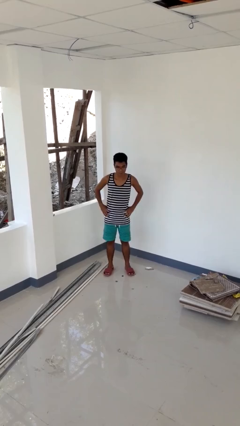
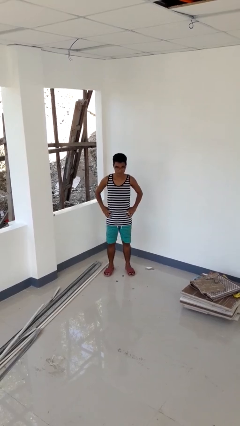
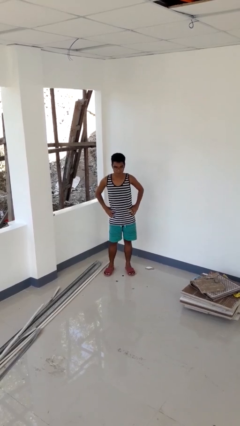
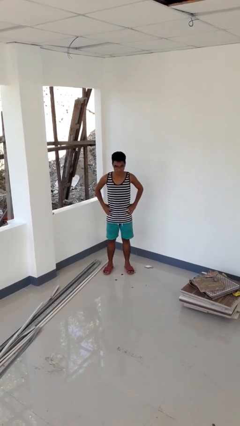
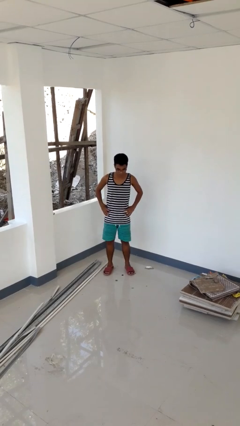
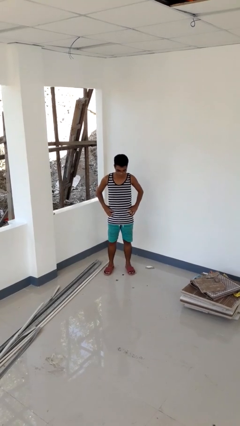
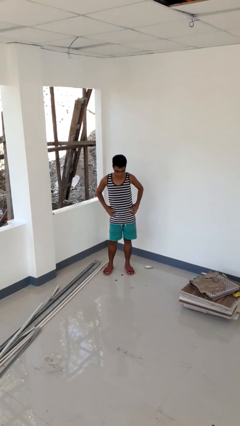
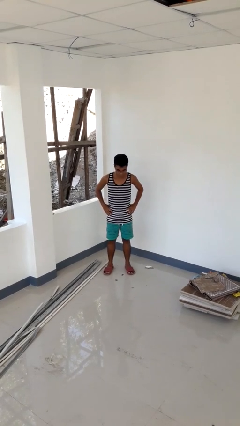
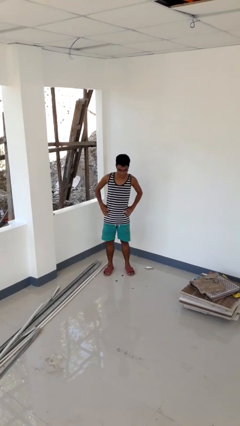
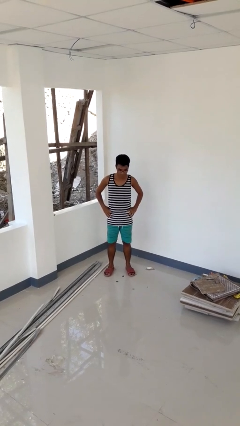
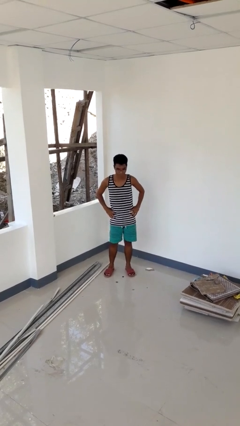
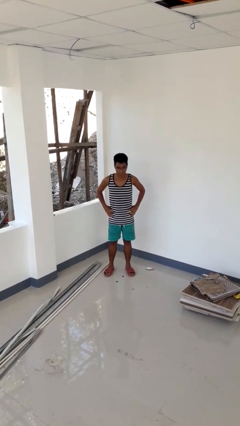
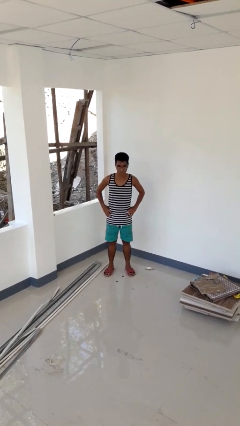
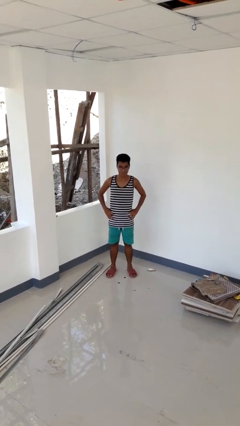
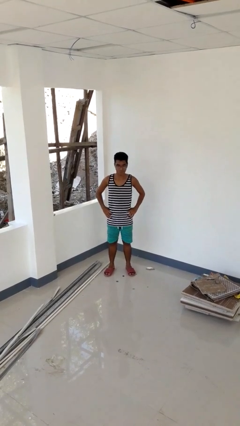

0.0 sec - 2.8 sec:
person wiggles hips

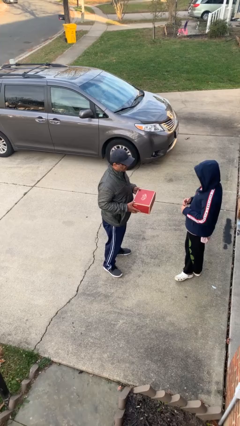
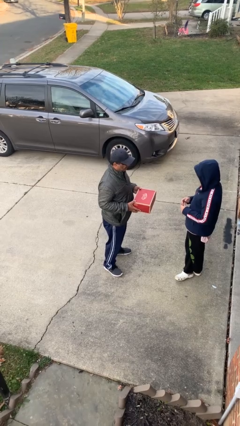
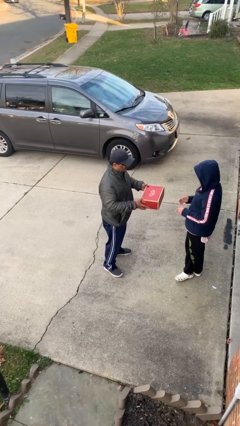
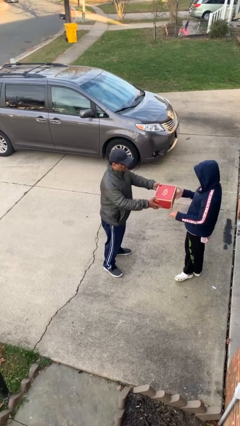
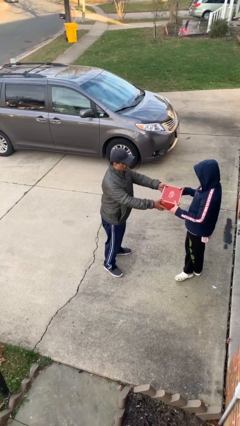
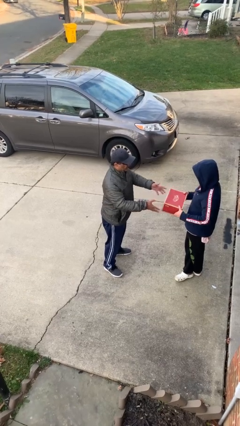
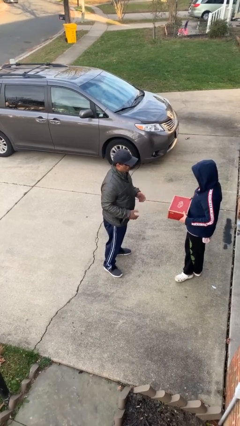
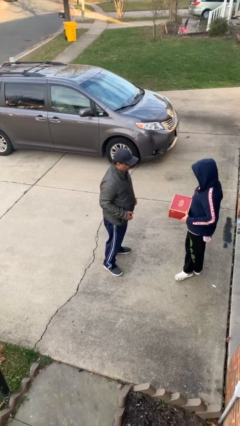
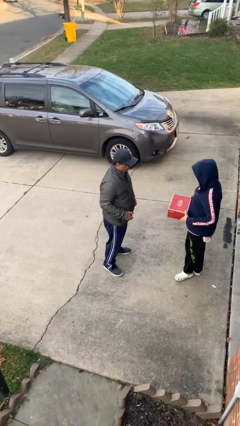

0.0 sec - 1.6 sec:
person transfers object to person

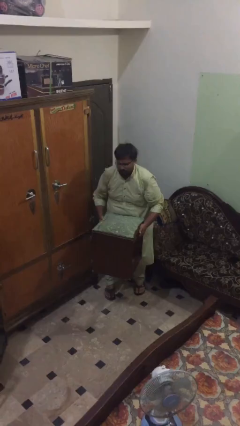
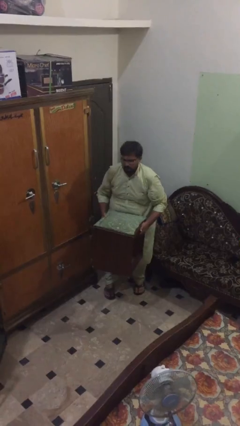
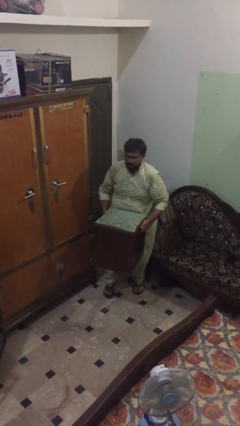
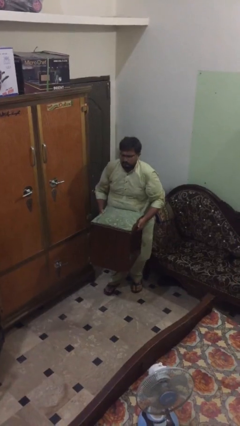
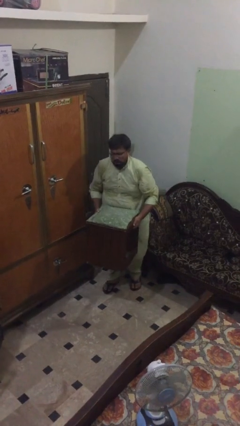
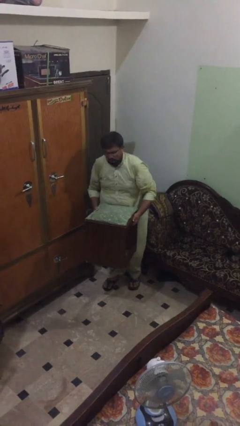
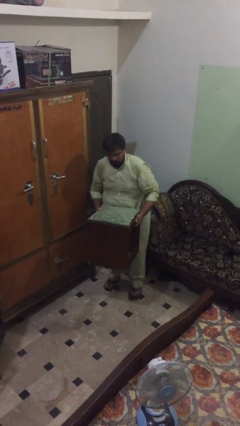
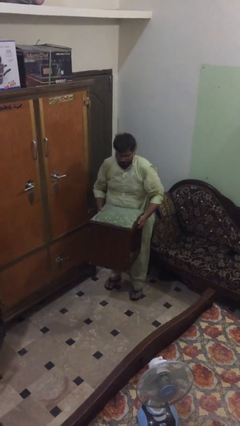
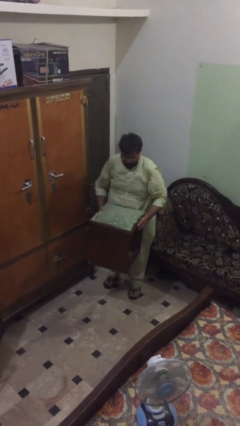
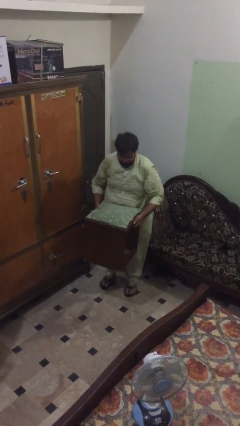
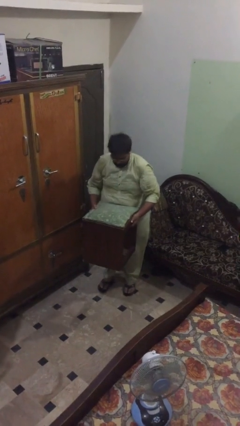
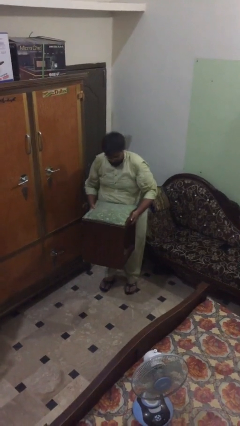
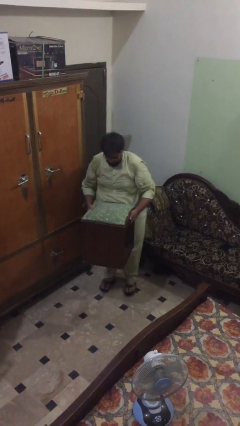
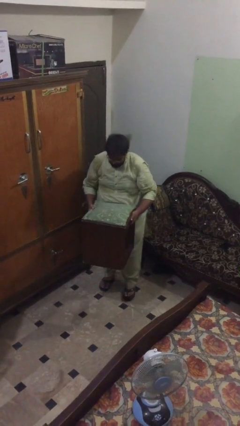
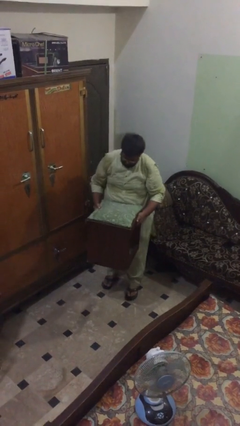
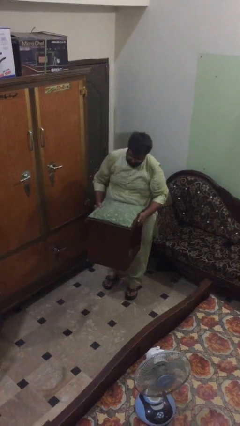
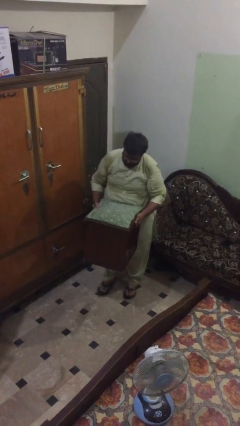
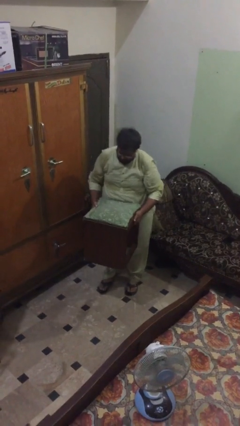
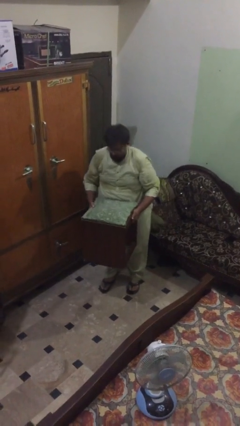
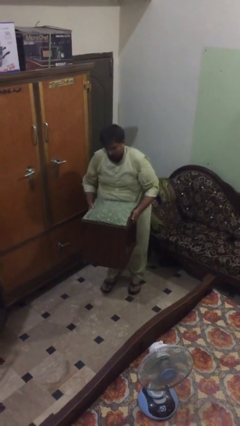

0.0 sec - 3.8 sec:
person carries heavy object

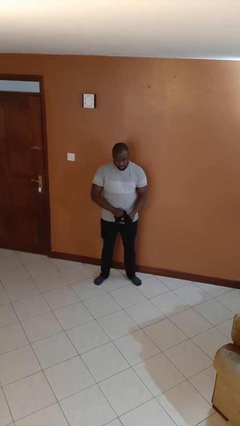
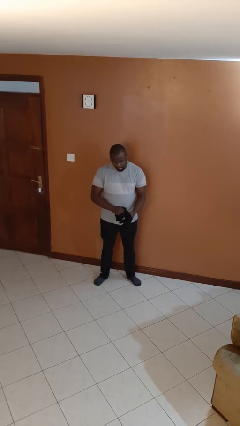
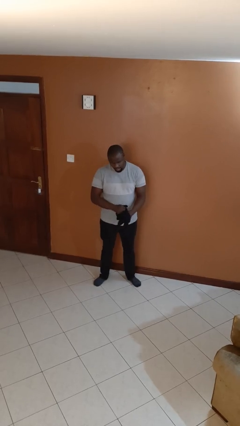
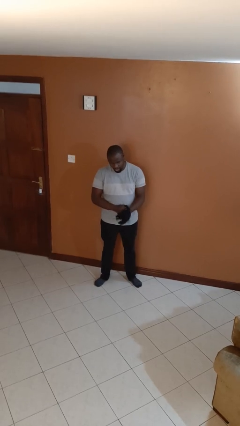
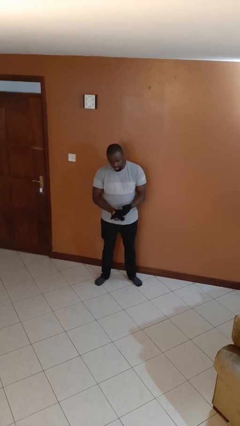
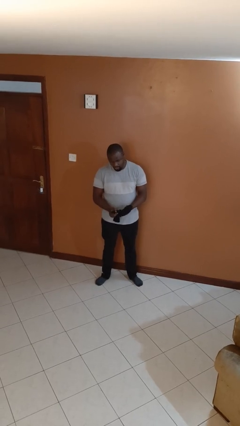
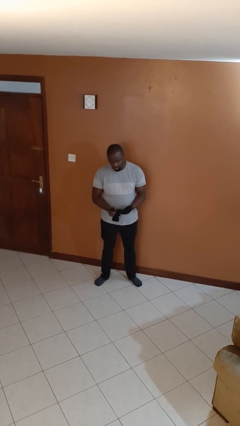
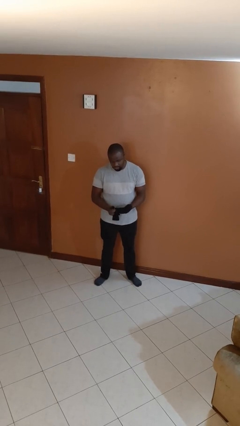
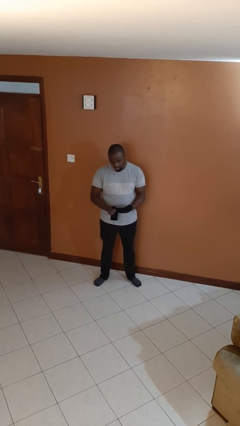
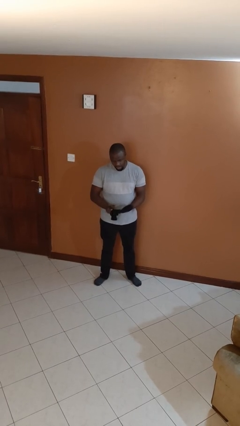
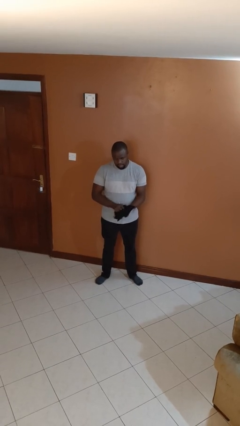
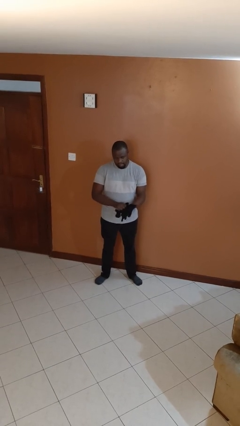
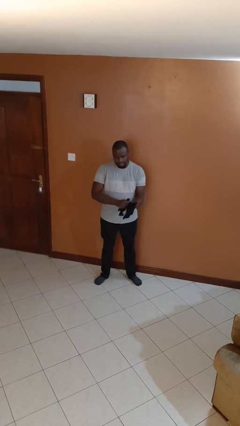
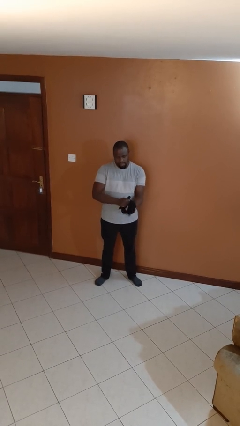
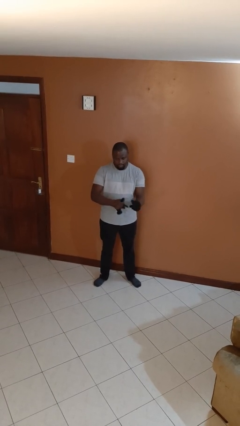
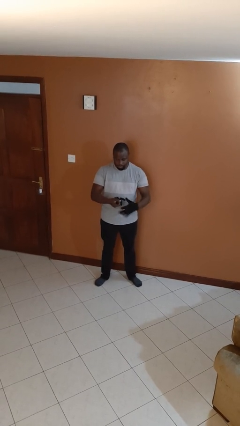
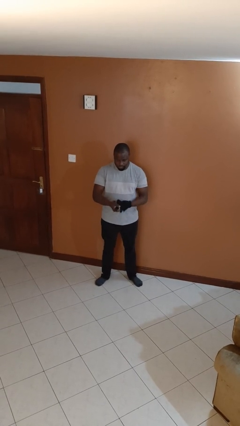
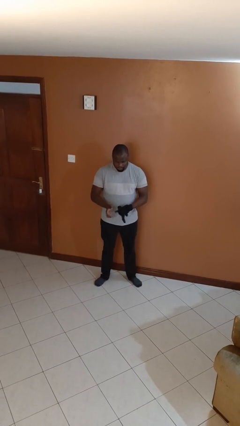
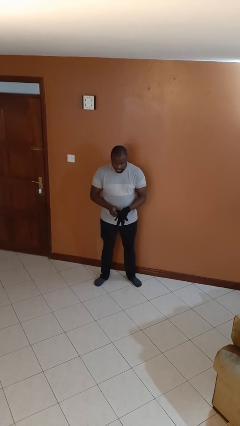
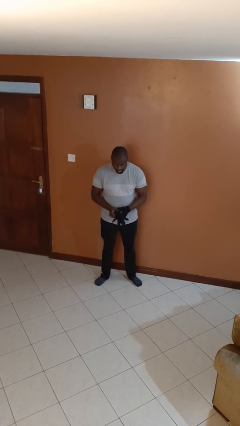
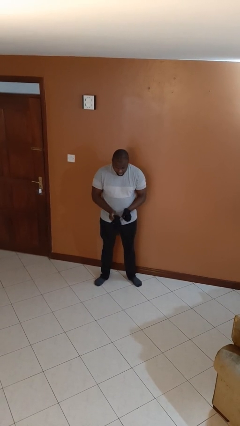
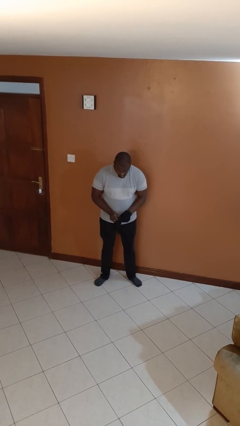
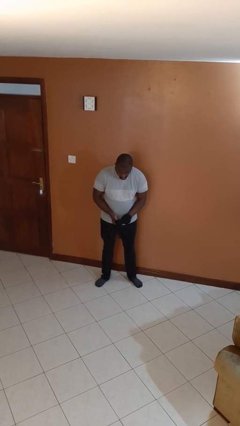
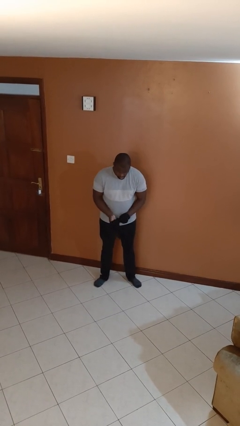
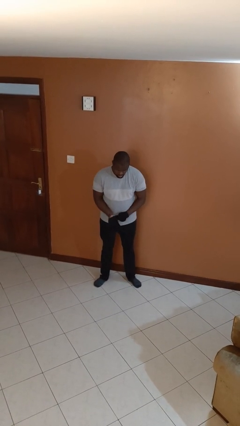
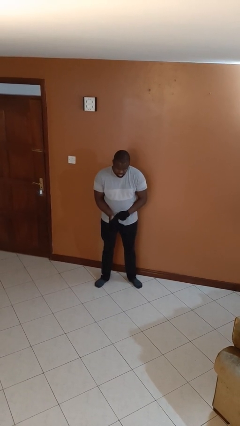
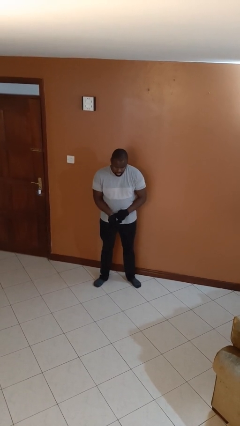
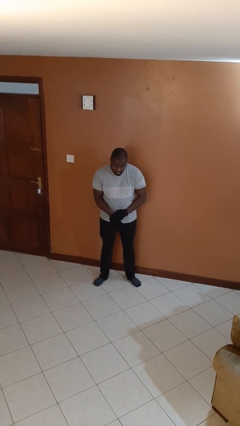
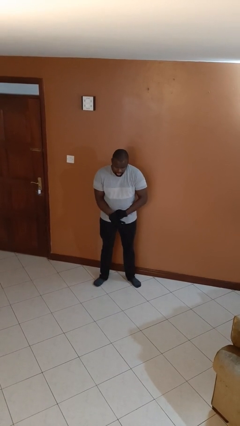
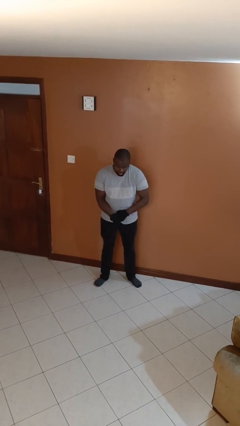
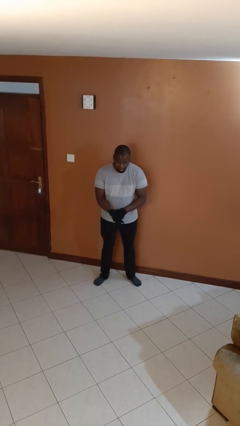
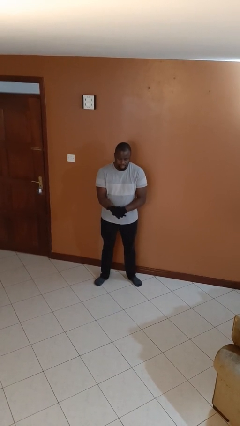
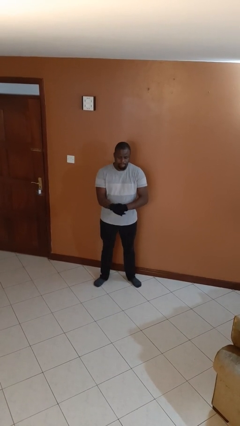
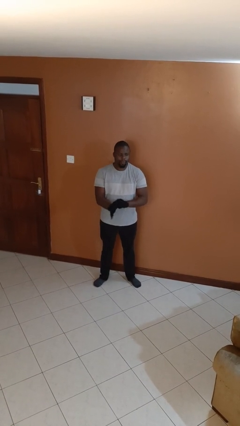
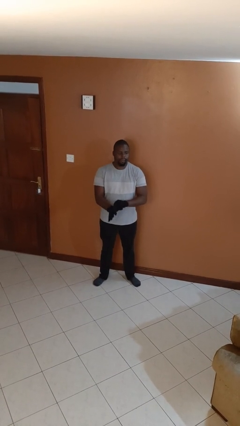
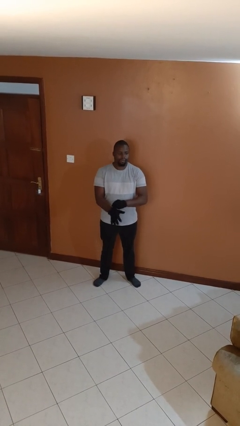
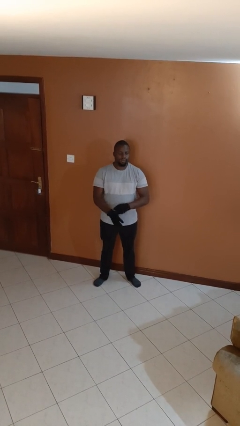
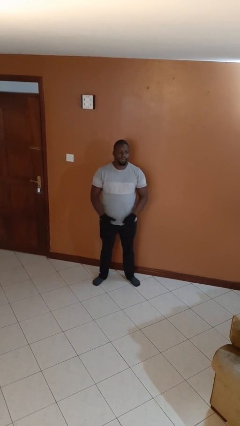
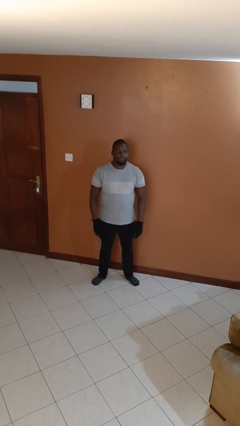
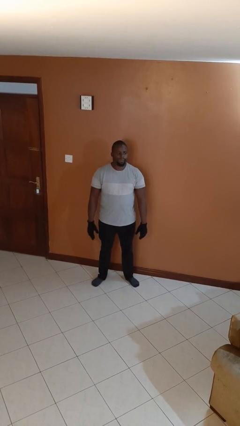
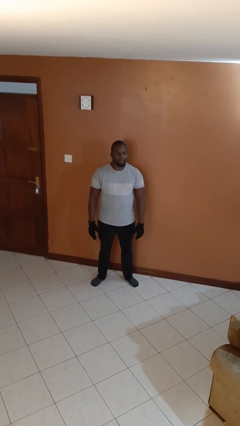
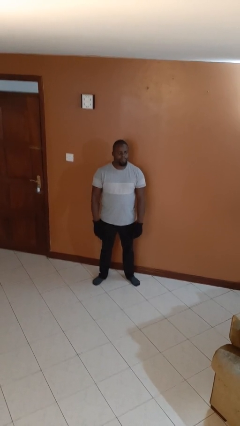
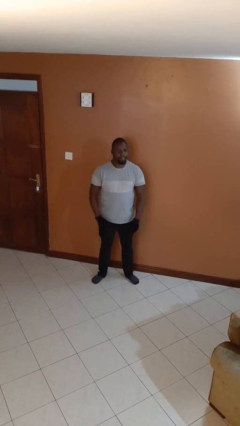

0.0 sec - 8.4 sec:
person puts on gloves

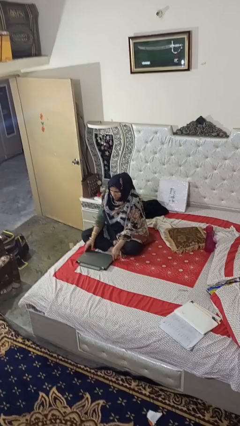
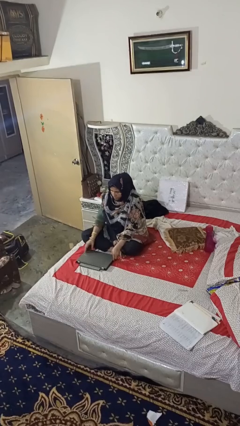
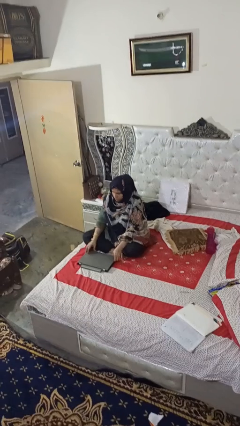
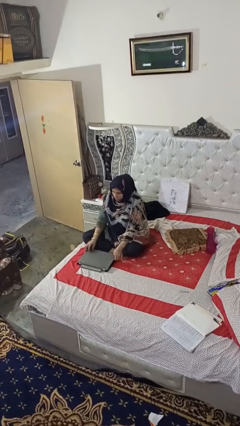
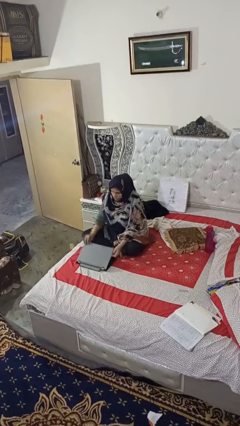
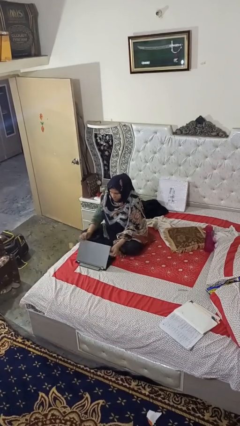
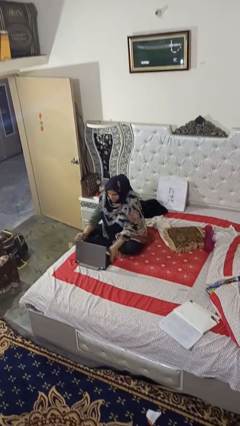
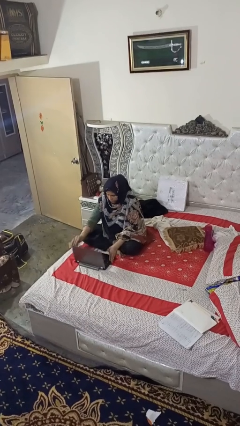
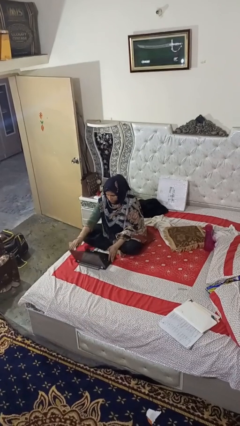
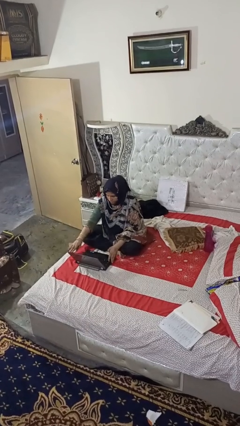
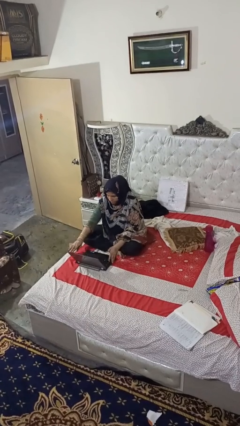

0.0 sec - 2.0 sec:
person opens laptop
